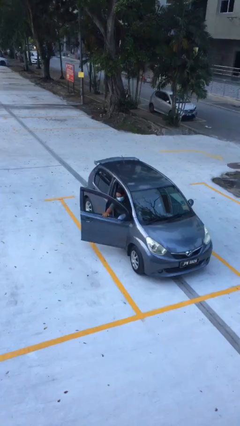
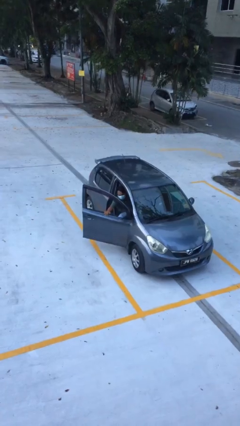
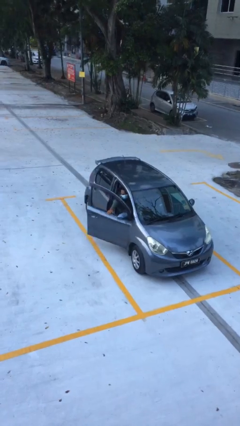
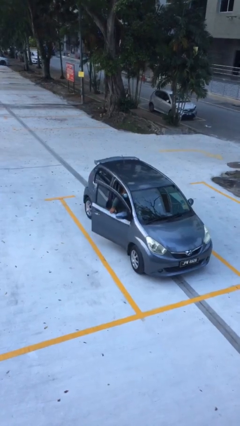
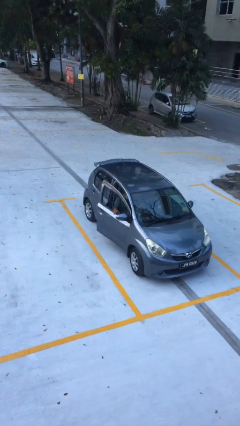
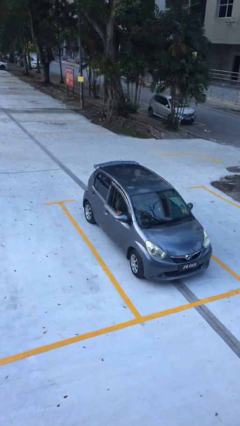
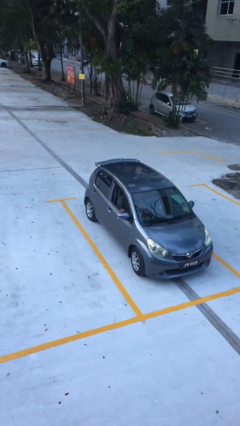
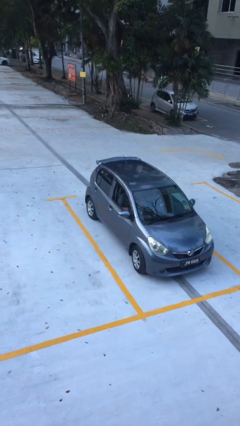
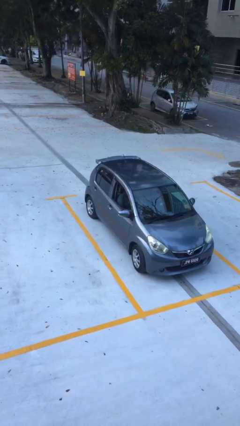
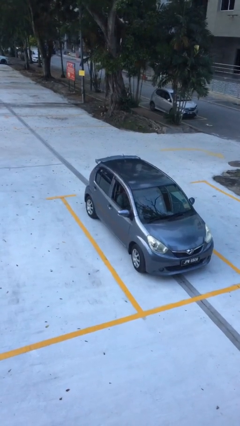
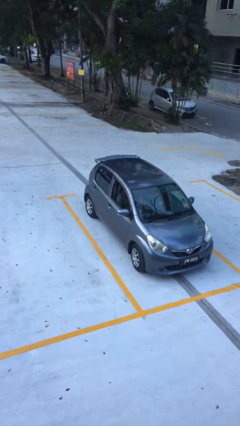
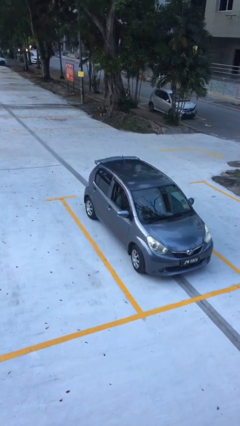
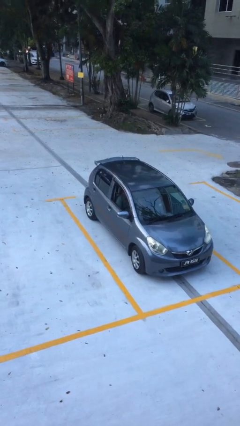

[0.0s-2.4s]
person closes car door

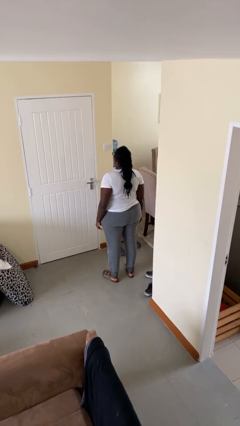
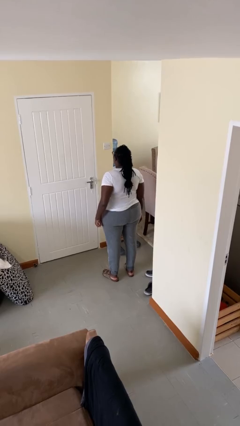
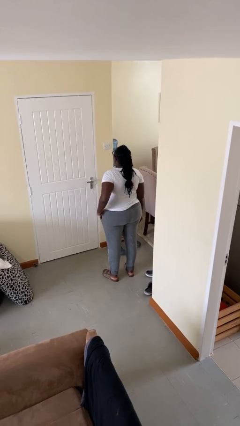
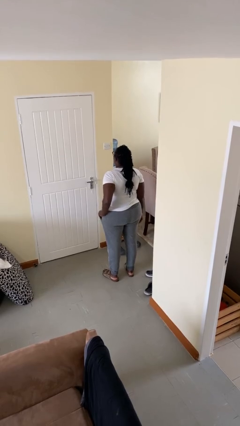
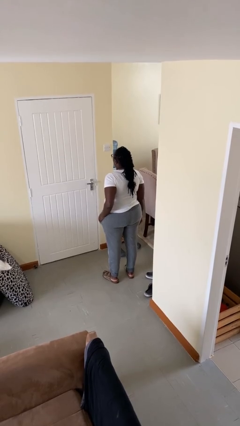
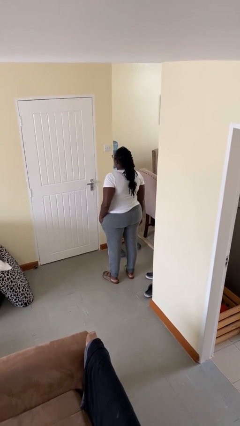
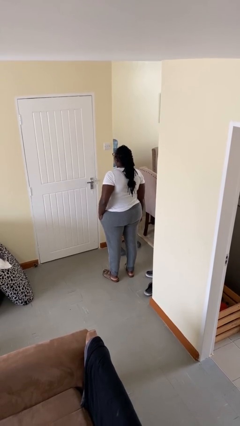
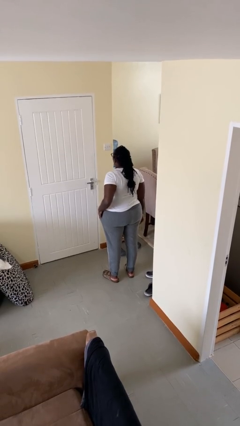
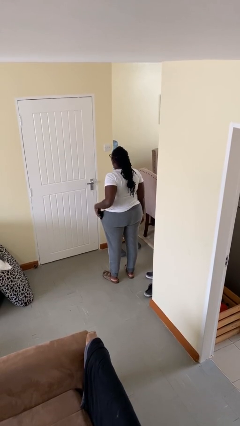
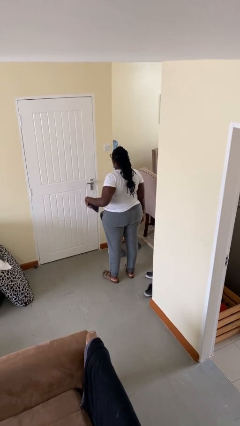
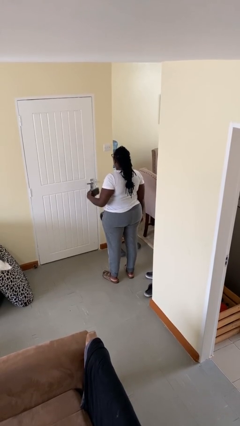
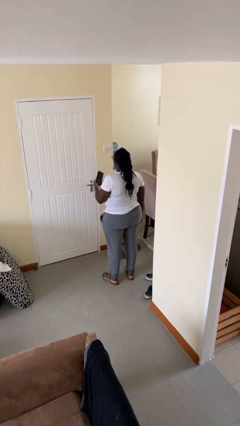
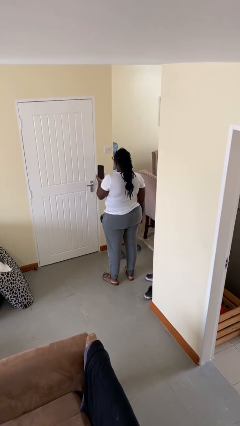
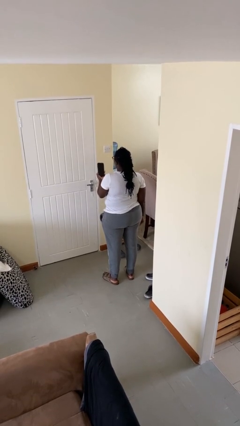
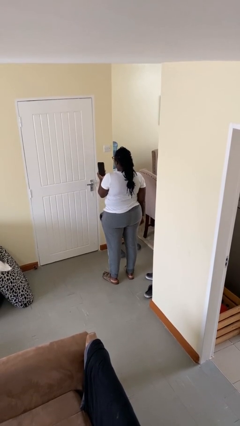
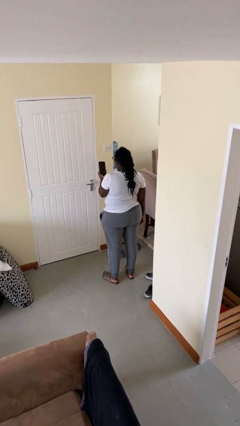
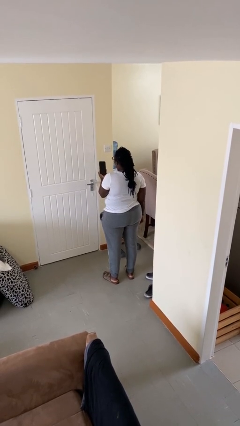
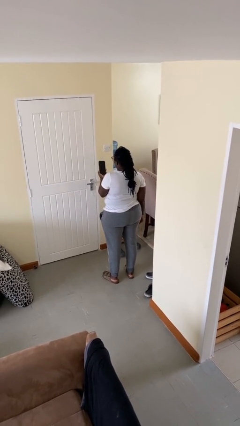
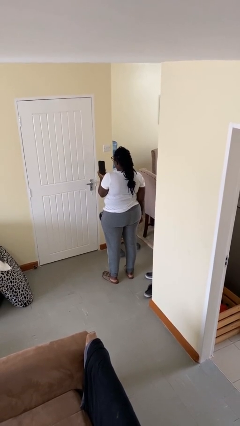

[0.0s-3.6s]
person takes phone from pocket

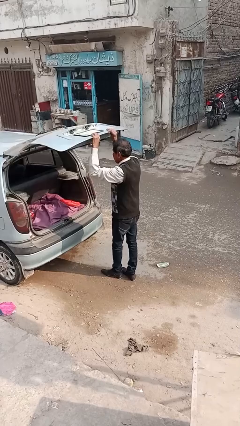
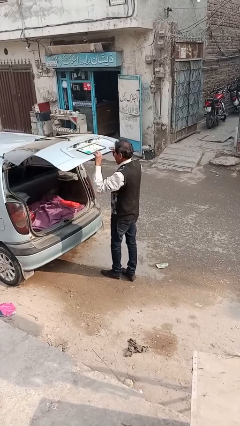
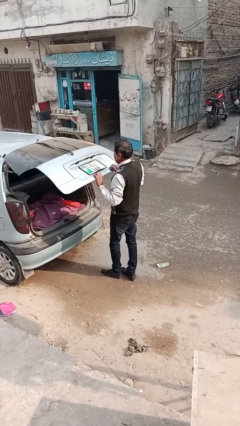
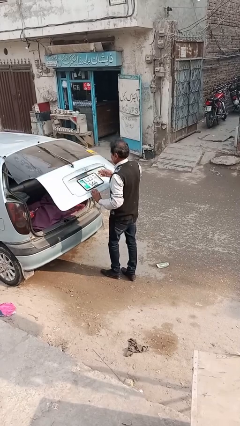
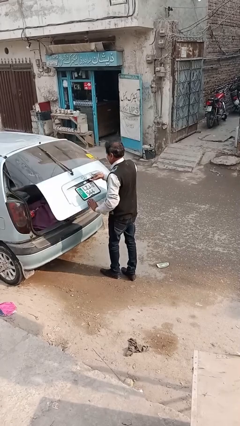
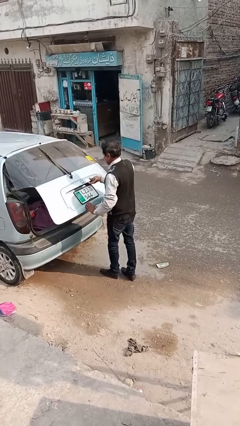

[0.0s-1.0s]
person closes car trunk

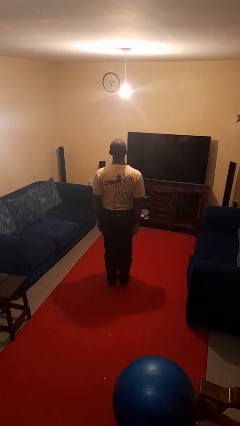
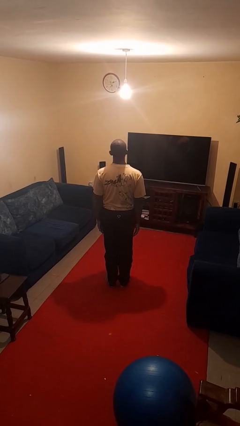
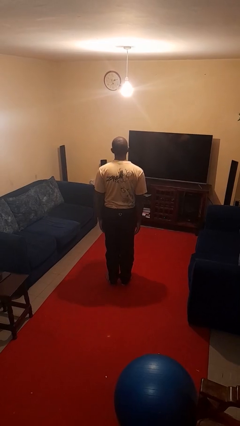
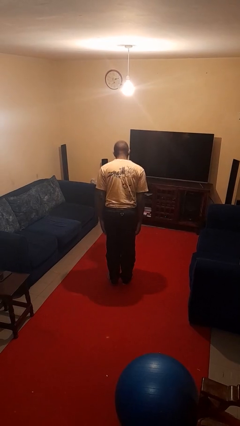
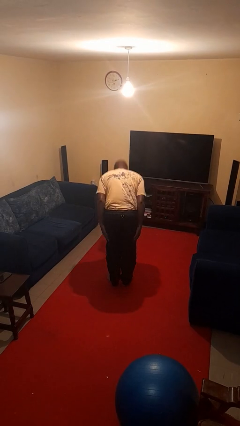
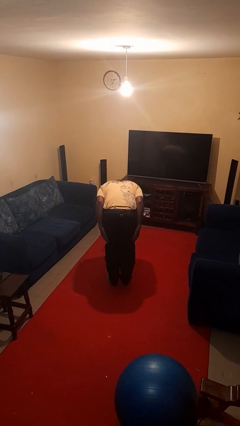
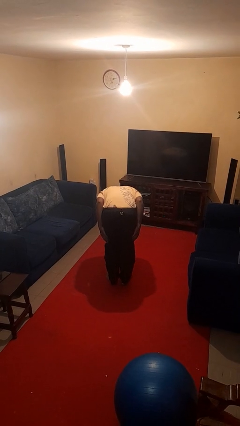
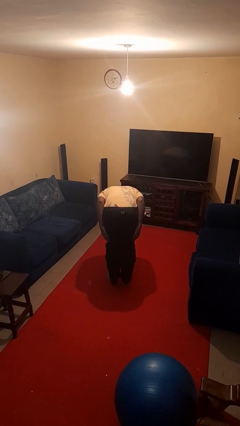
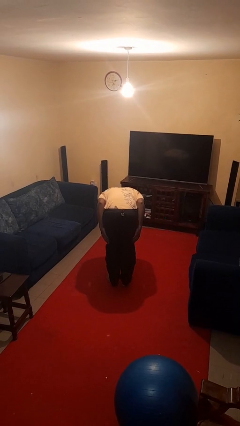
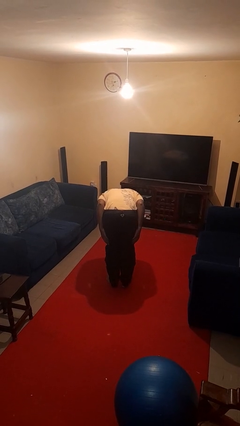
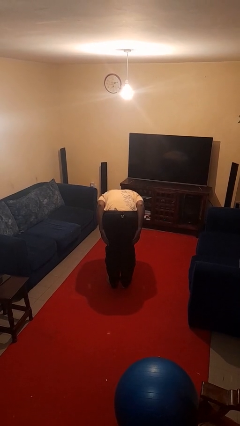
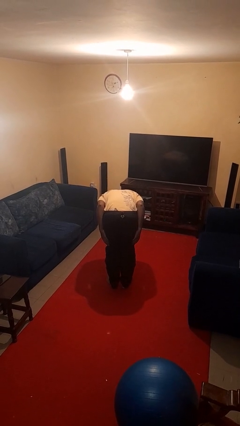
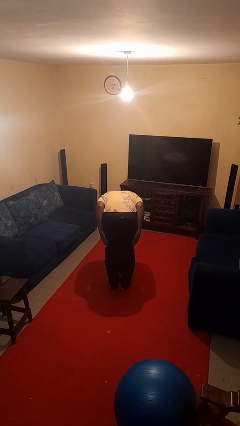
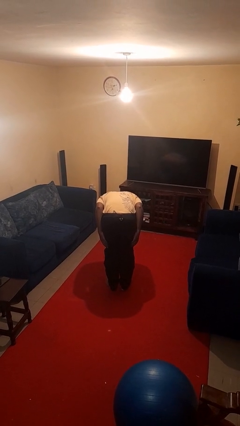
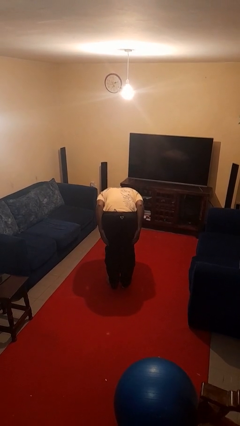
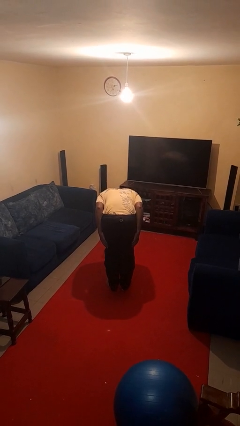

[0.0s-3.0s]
person bows

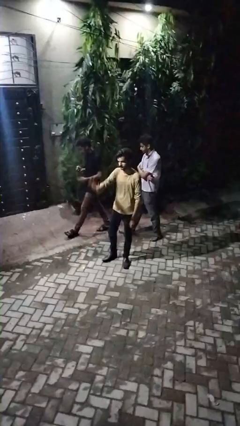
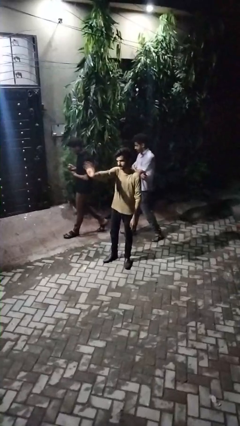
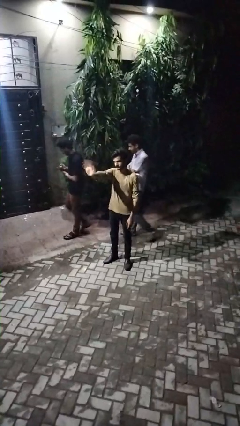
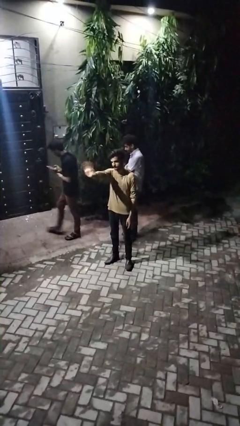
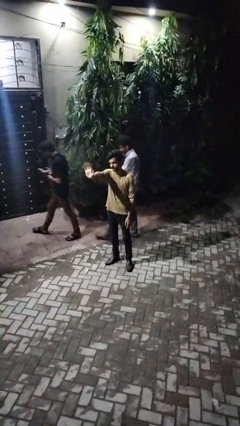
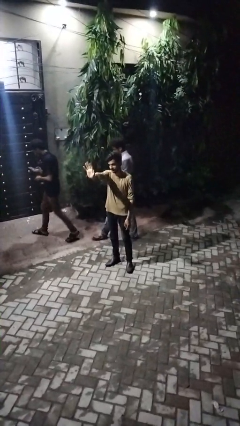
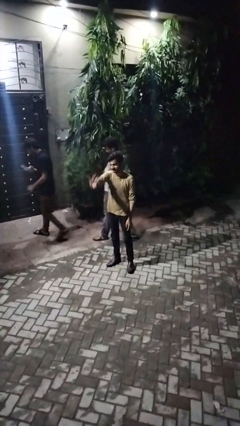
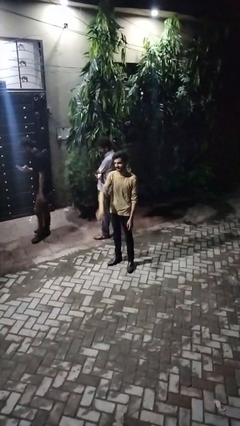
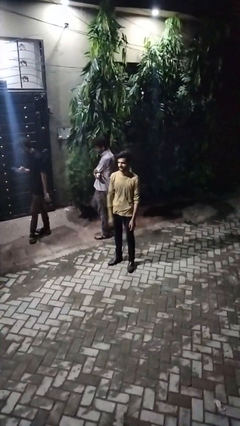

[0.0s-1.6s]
person waves at person

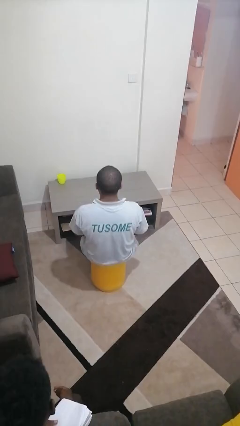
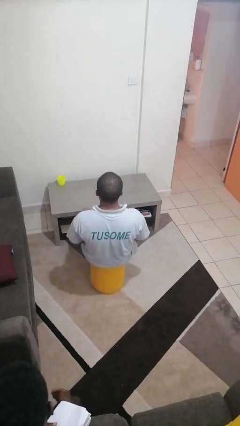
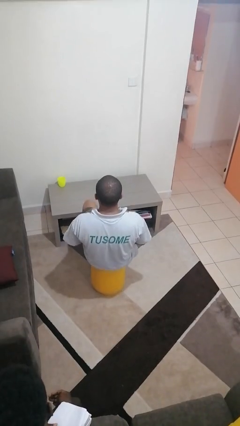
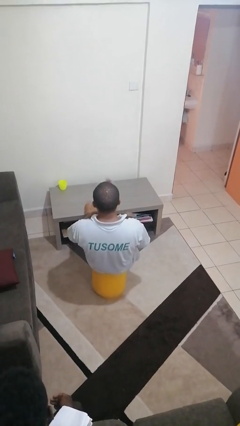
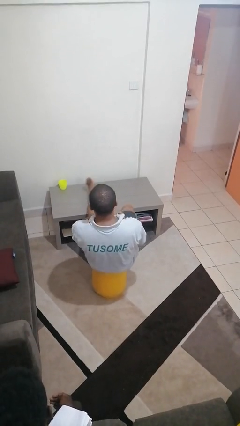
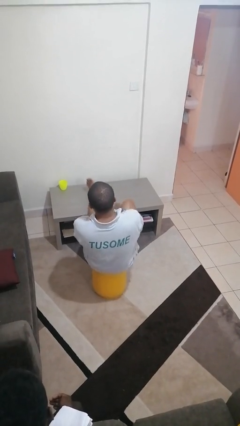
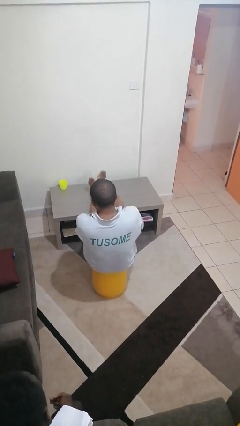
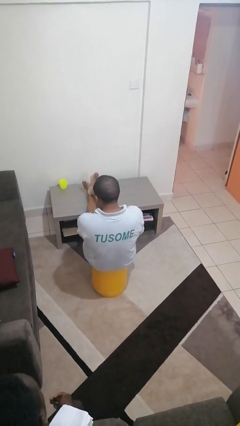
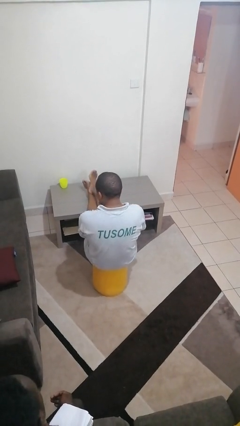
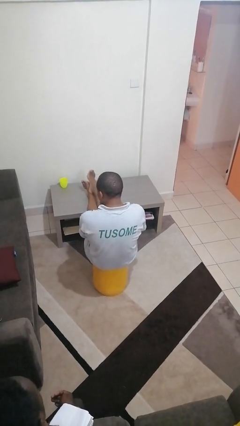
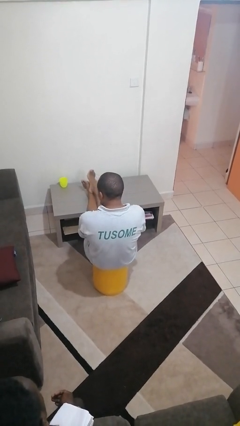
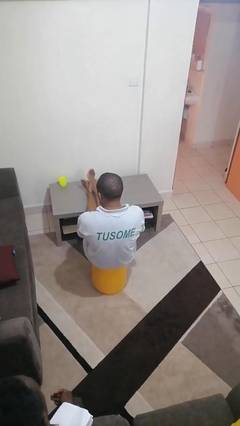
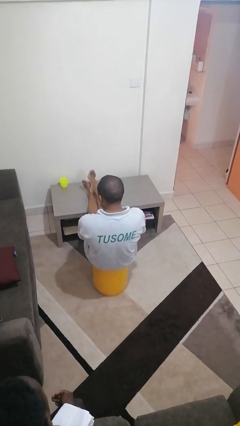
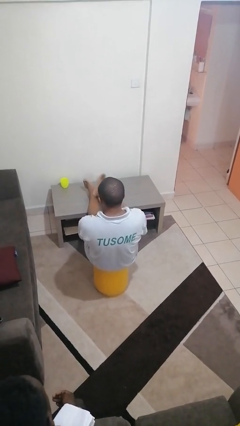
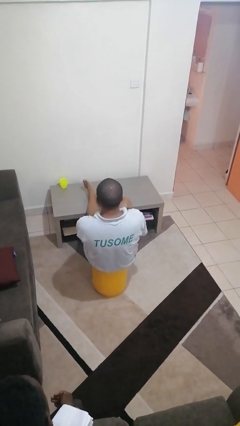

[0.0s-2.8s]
person puts feet up

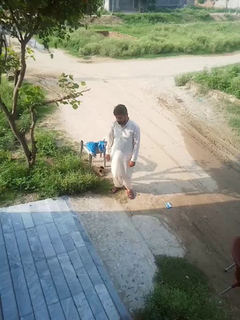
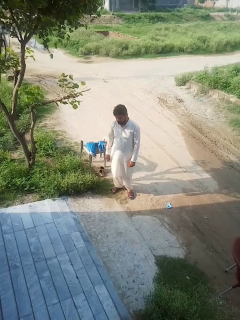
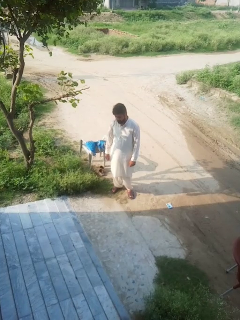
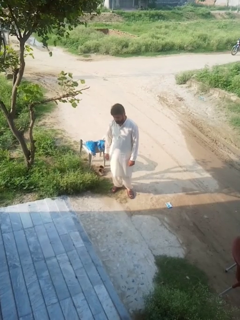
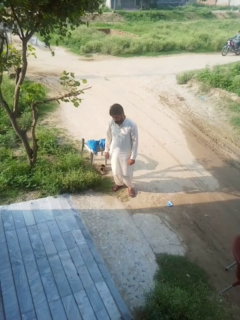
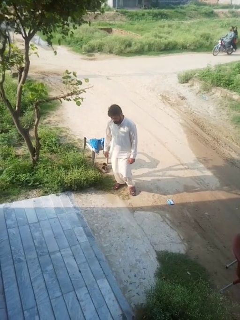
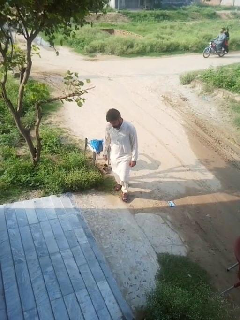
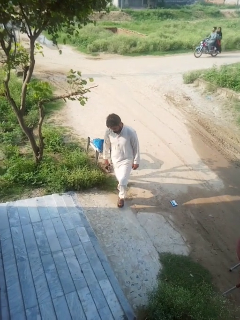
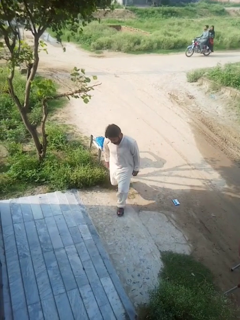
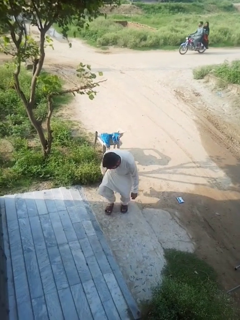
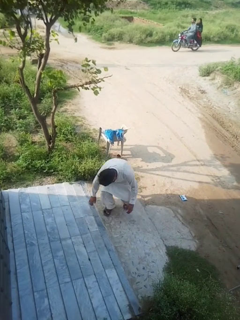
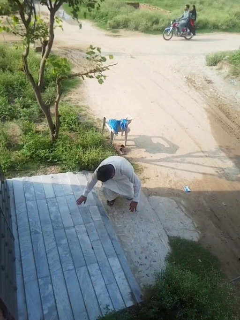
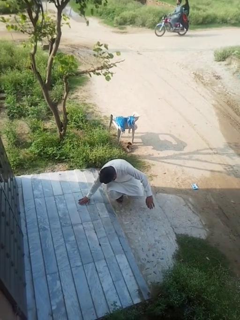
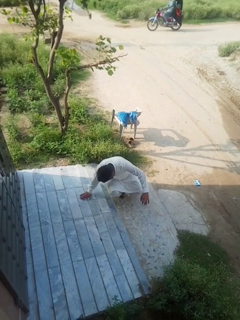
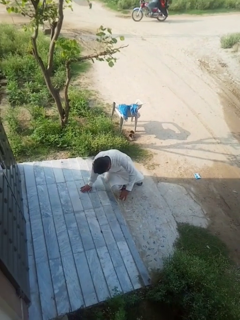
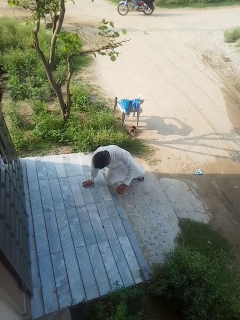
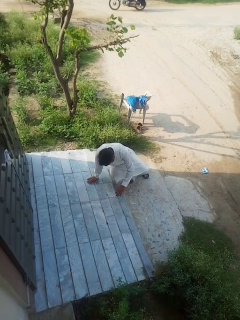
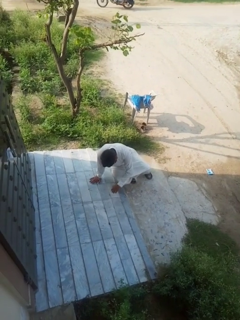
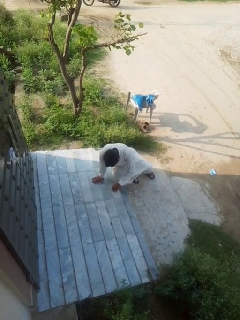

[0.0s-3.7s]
person trips on object on floor
